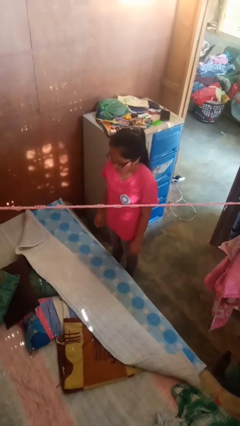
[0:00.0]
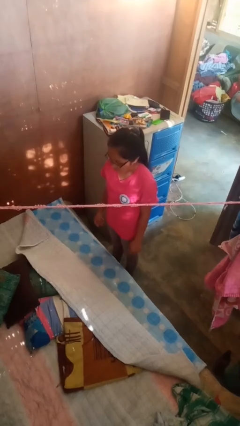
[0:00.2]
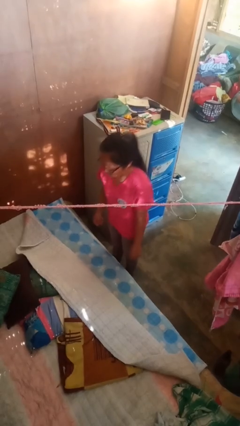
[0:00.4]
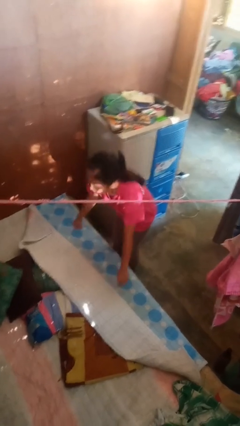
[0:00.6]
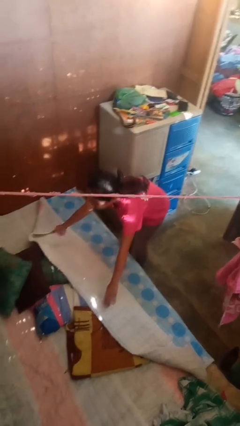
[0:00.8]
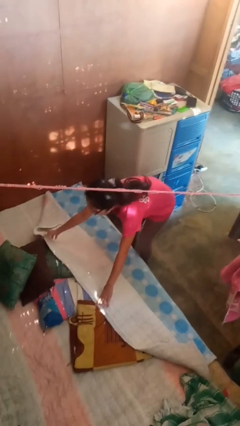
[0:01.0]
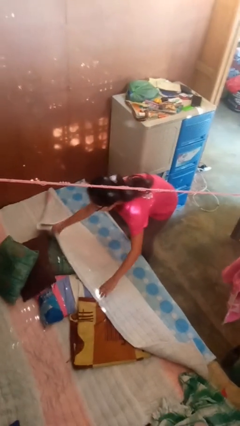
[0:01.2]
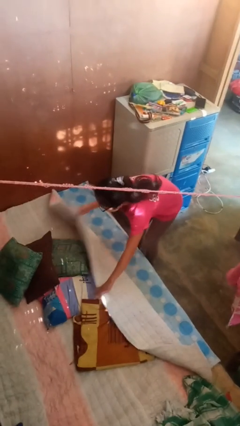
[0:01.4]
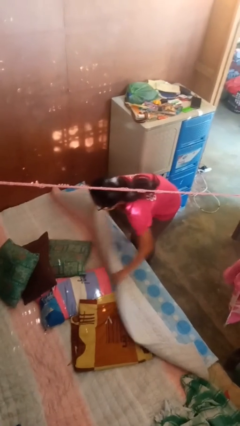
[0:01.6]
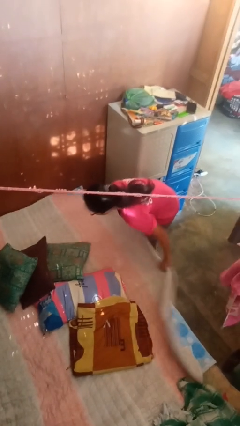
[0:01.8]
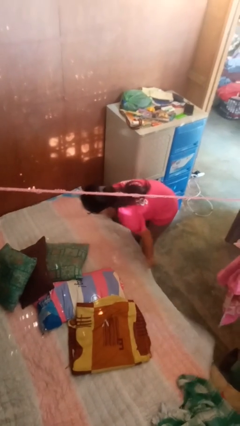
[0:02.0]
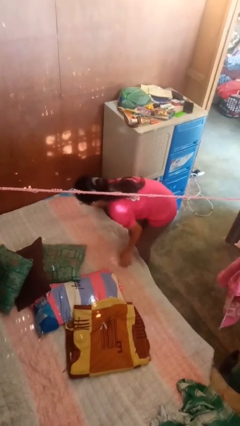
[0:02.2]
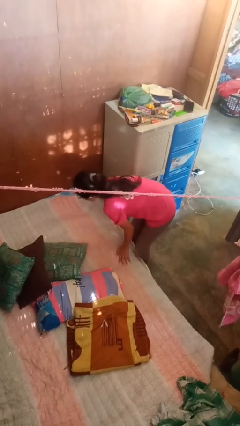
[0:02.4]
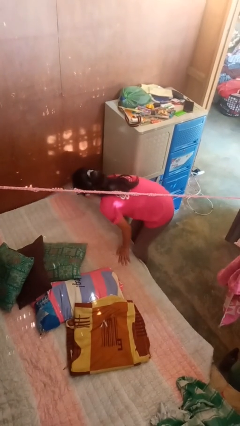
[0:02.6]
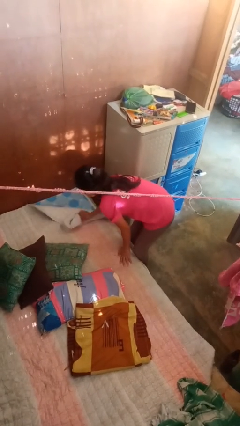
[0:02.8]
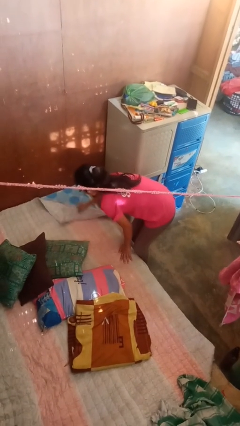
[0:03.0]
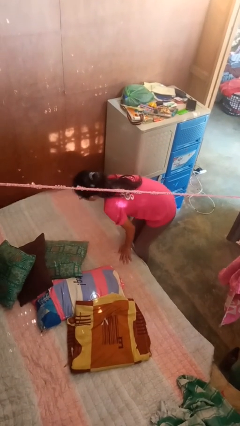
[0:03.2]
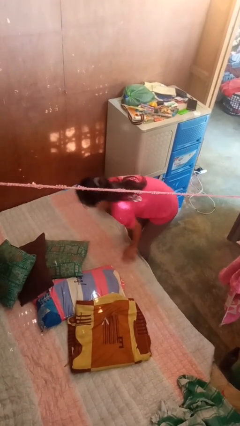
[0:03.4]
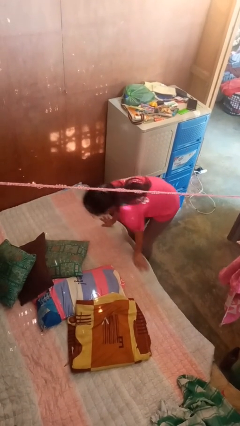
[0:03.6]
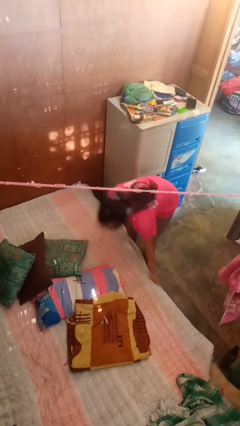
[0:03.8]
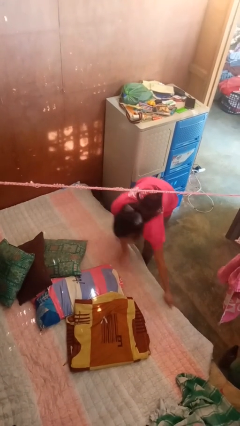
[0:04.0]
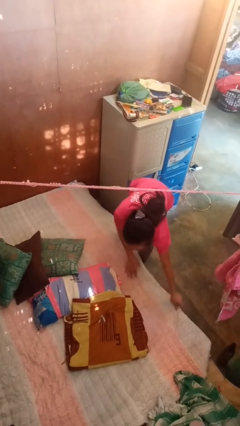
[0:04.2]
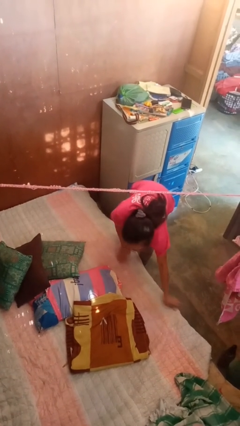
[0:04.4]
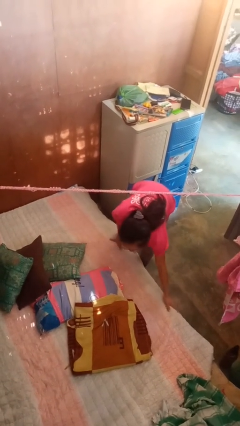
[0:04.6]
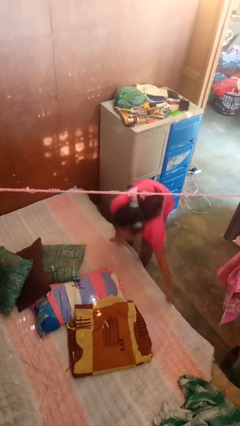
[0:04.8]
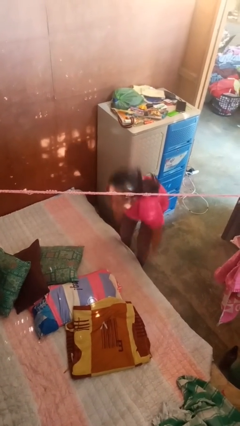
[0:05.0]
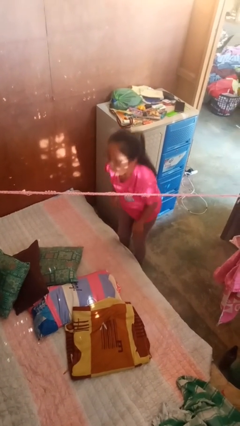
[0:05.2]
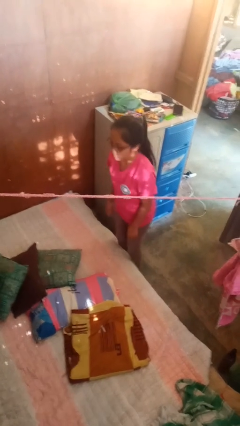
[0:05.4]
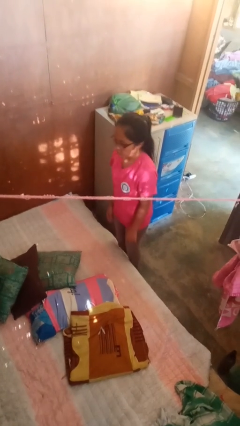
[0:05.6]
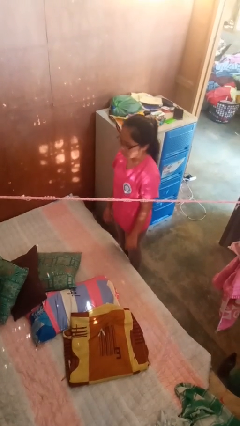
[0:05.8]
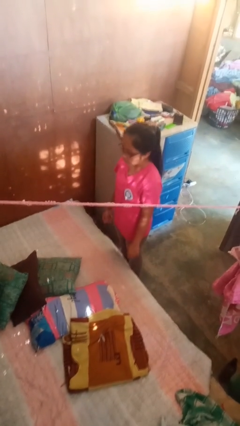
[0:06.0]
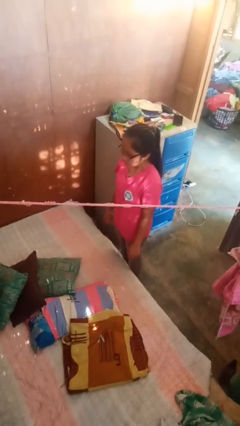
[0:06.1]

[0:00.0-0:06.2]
person makes bed

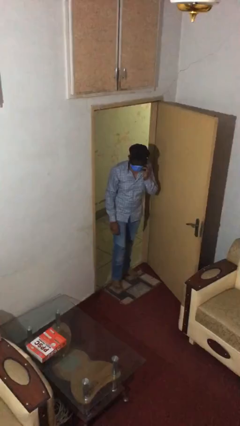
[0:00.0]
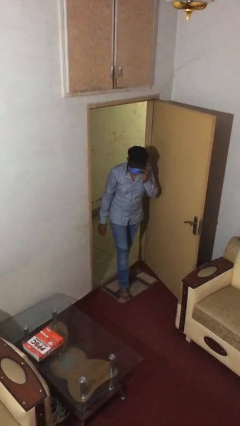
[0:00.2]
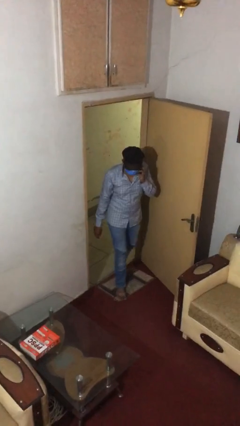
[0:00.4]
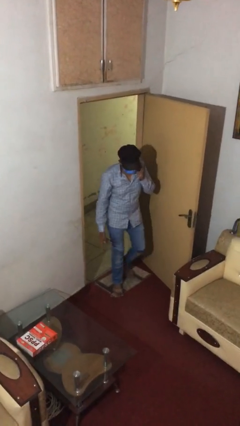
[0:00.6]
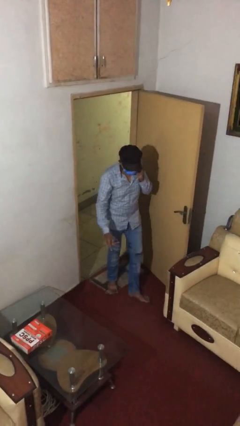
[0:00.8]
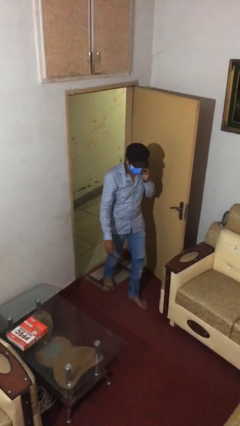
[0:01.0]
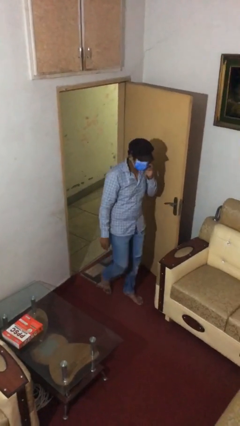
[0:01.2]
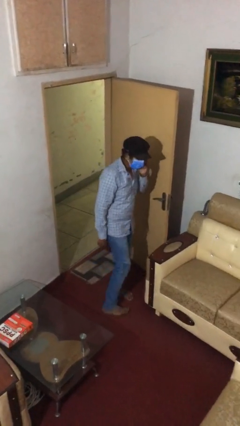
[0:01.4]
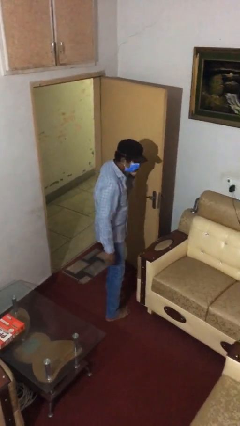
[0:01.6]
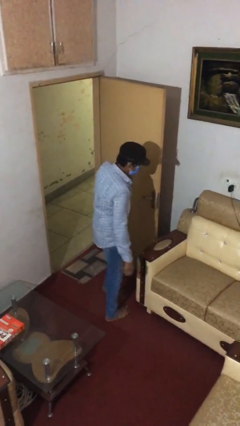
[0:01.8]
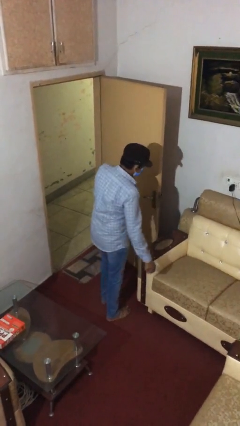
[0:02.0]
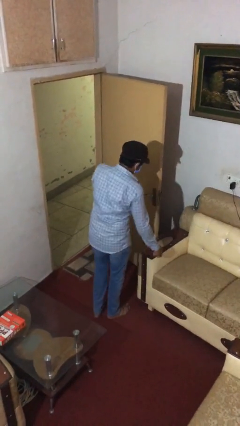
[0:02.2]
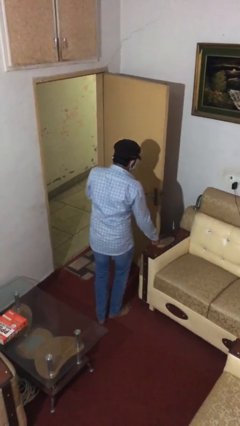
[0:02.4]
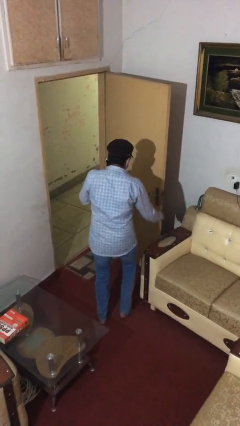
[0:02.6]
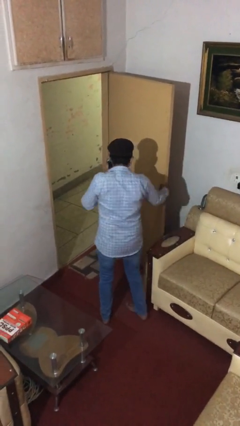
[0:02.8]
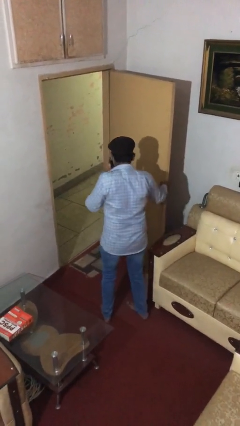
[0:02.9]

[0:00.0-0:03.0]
person enters scene through structure

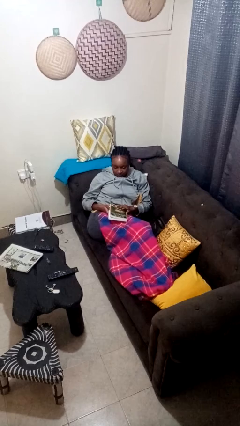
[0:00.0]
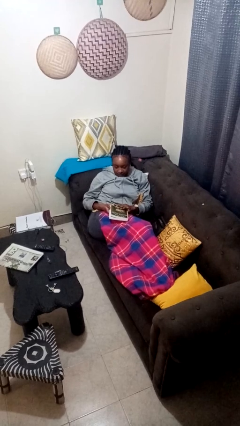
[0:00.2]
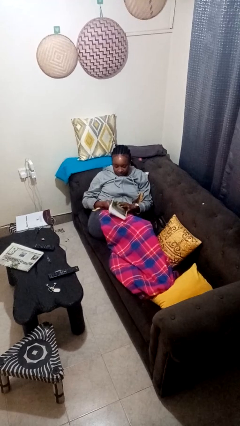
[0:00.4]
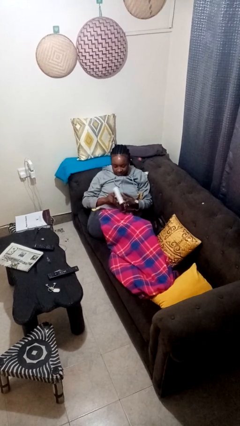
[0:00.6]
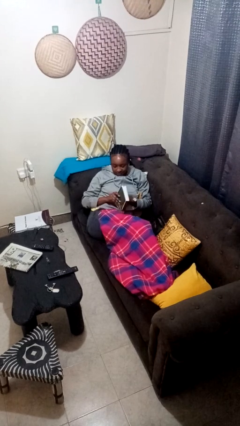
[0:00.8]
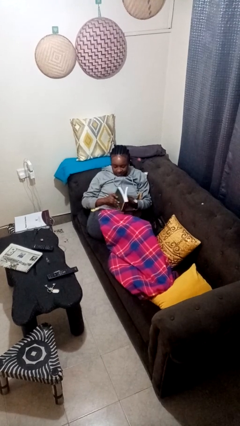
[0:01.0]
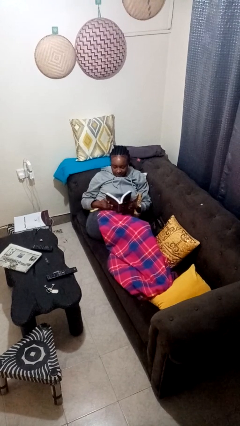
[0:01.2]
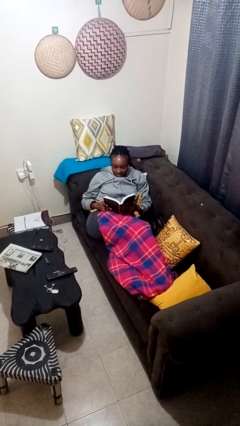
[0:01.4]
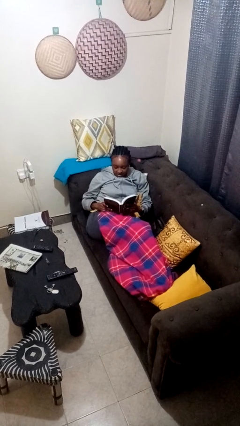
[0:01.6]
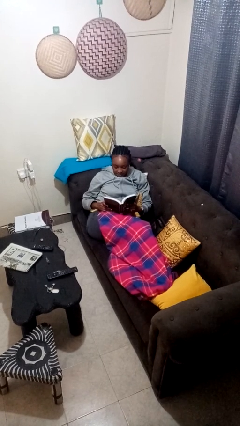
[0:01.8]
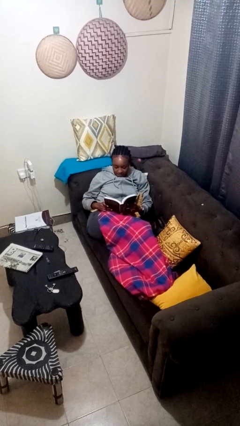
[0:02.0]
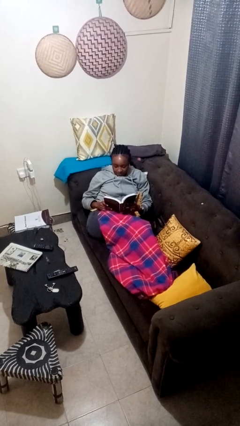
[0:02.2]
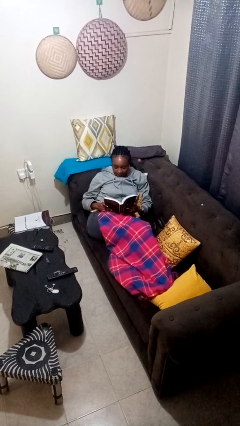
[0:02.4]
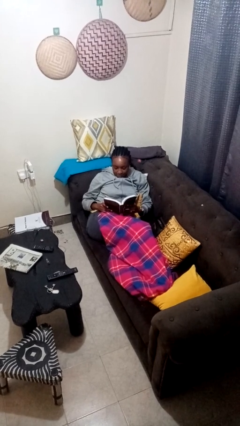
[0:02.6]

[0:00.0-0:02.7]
person reads book

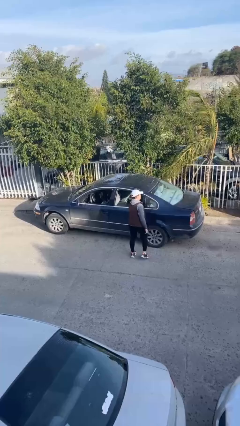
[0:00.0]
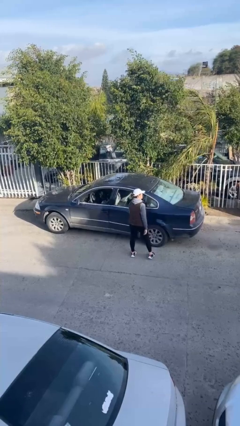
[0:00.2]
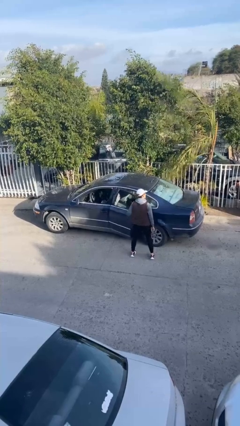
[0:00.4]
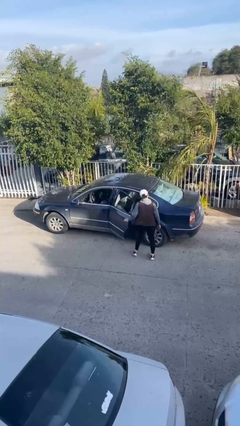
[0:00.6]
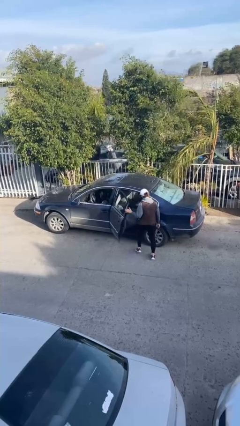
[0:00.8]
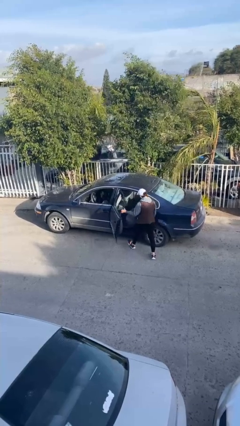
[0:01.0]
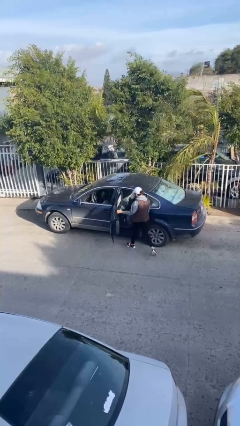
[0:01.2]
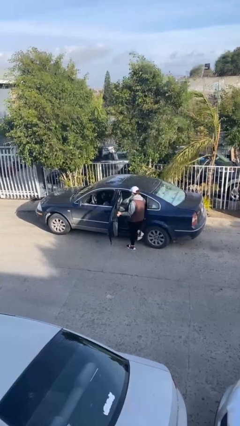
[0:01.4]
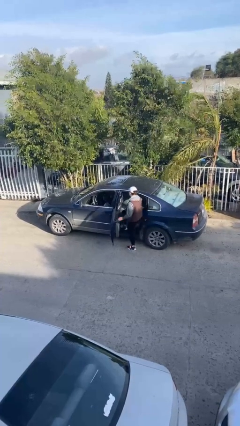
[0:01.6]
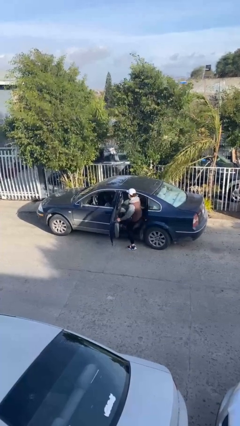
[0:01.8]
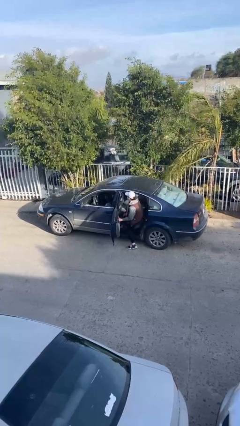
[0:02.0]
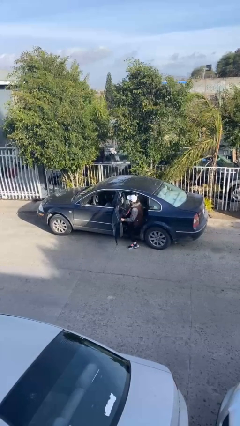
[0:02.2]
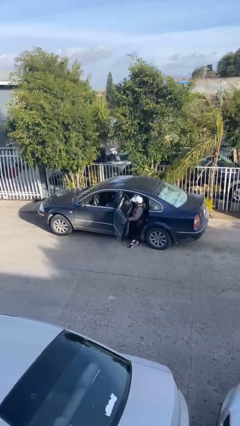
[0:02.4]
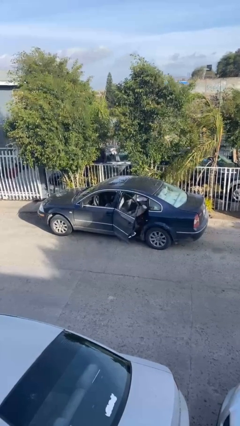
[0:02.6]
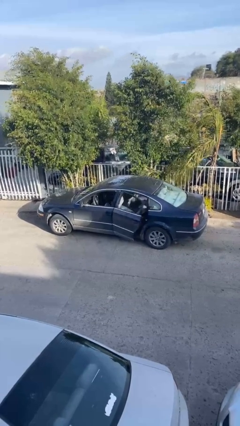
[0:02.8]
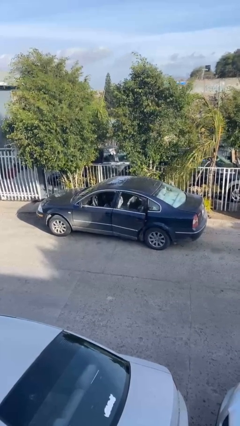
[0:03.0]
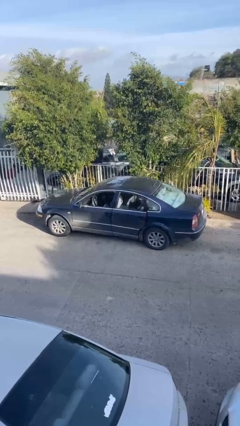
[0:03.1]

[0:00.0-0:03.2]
car picks up person

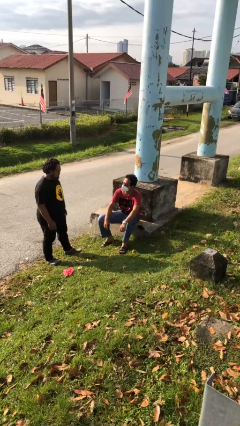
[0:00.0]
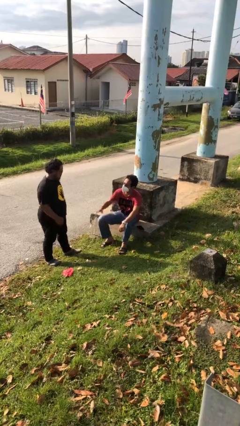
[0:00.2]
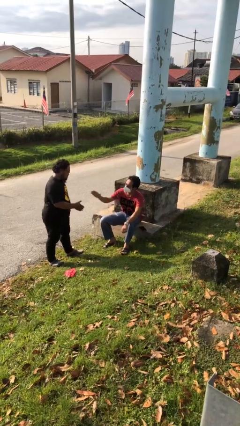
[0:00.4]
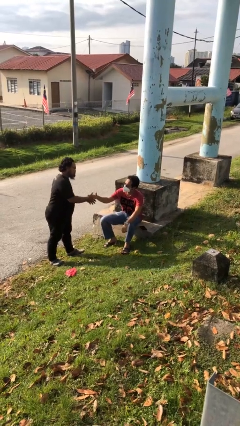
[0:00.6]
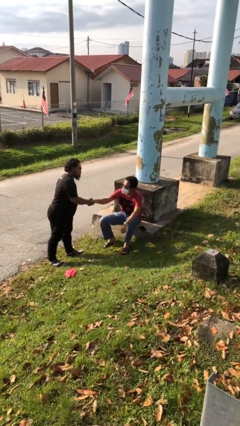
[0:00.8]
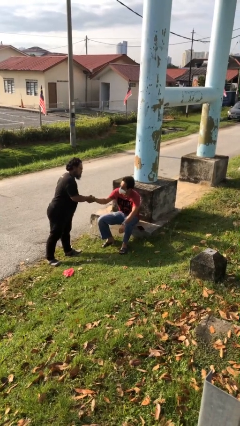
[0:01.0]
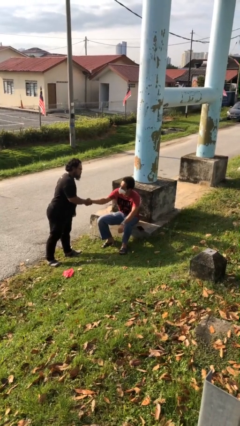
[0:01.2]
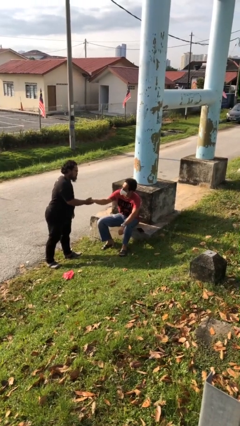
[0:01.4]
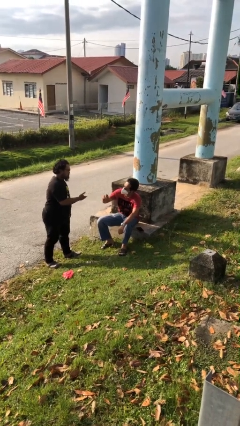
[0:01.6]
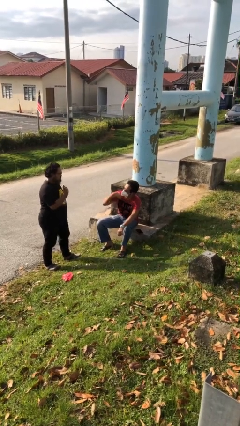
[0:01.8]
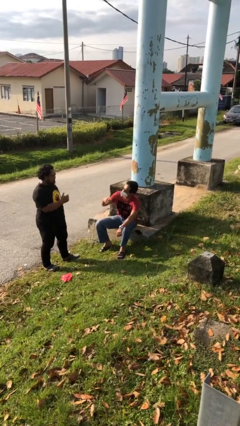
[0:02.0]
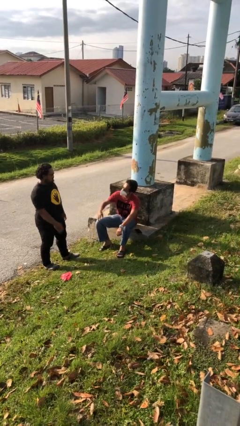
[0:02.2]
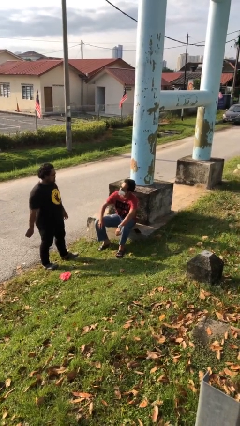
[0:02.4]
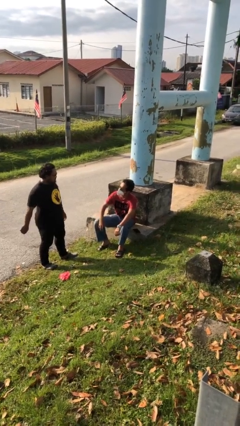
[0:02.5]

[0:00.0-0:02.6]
person shakes hand
